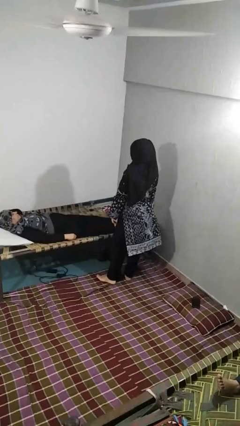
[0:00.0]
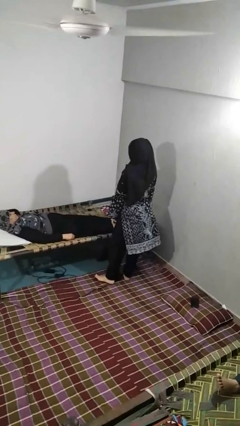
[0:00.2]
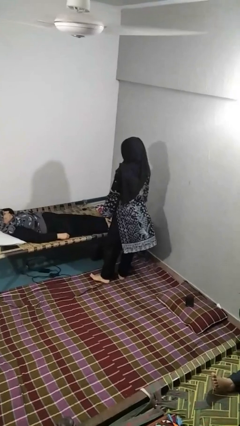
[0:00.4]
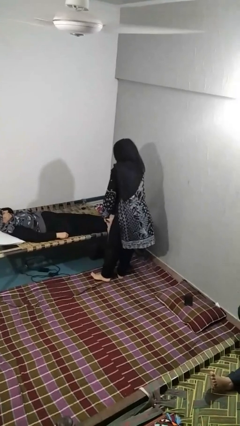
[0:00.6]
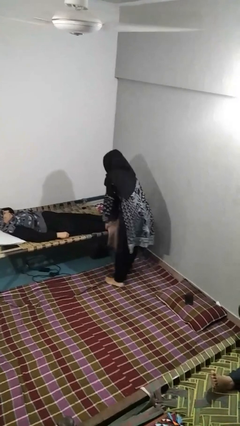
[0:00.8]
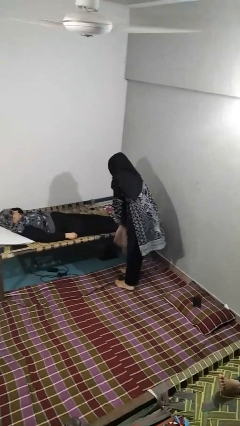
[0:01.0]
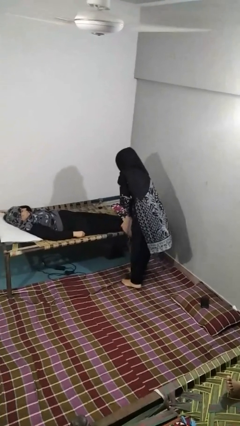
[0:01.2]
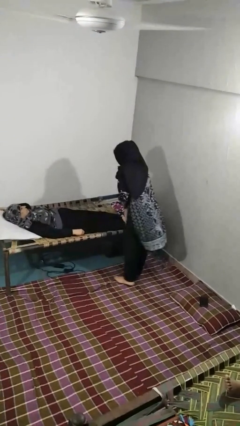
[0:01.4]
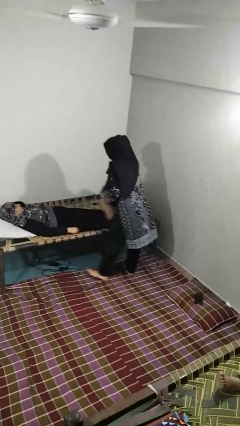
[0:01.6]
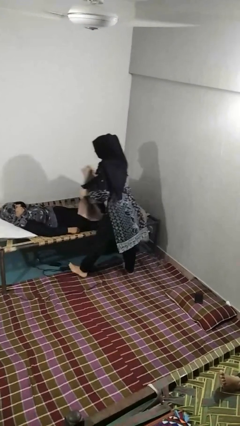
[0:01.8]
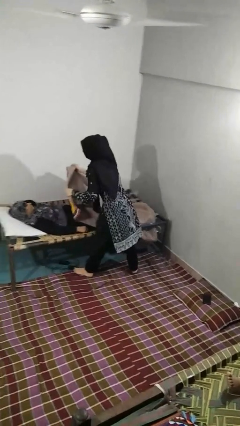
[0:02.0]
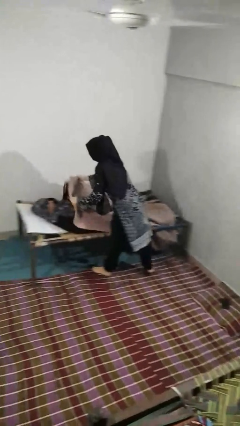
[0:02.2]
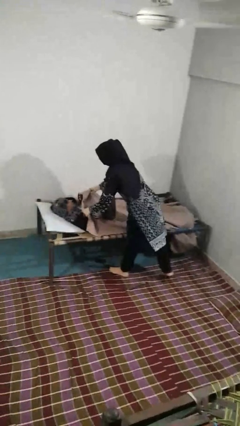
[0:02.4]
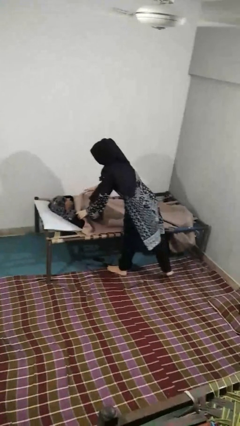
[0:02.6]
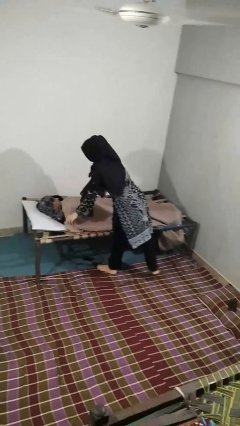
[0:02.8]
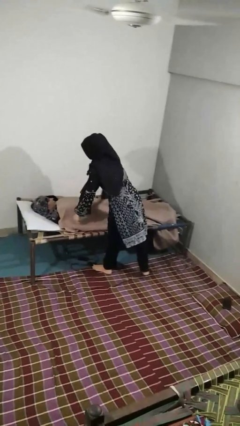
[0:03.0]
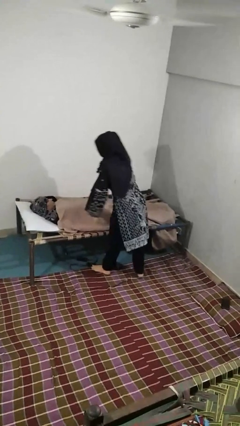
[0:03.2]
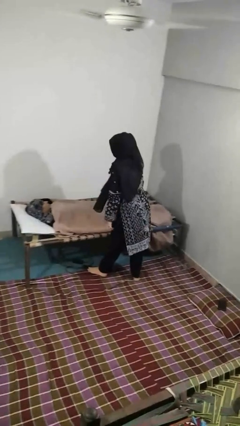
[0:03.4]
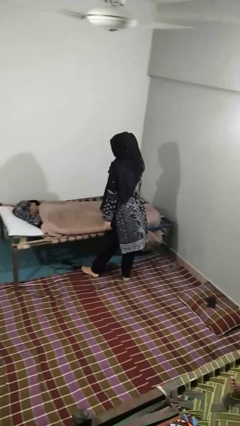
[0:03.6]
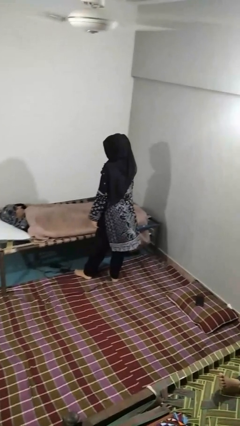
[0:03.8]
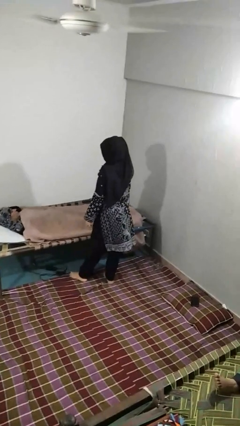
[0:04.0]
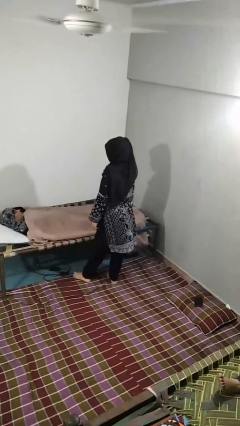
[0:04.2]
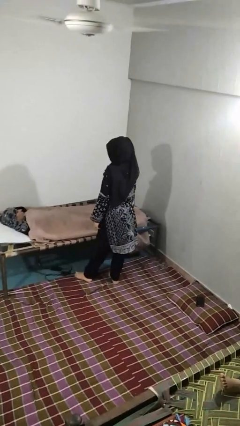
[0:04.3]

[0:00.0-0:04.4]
person covers friend with blanket

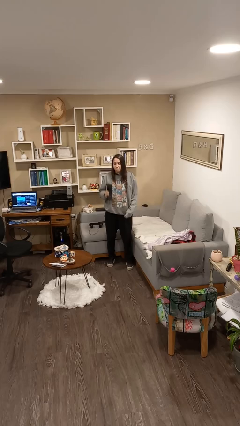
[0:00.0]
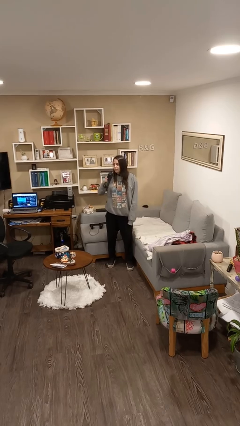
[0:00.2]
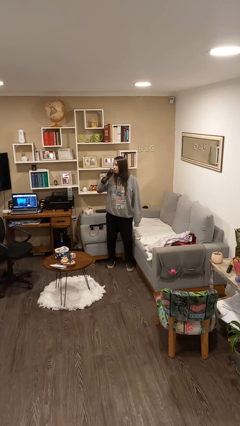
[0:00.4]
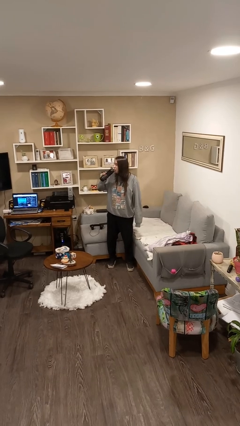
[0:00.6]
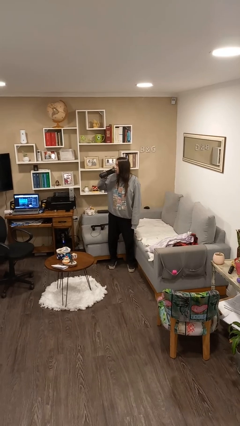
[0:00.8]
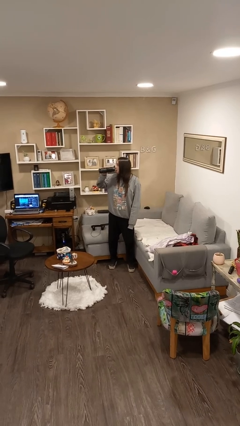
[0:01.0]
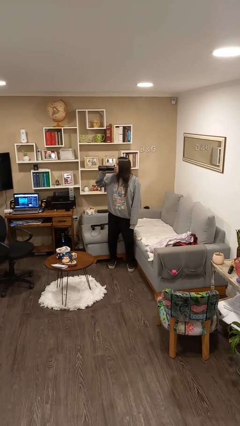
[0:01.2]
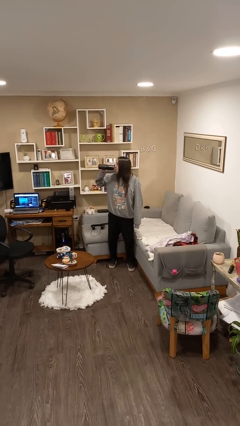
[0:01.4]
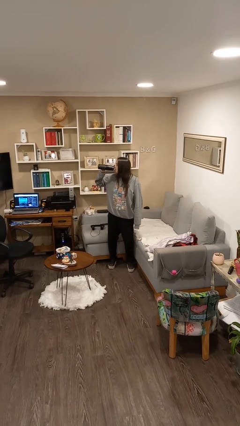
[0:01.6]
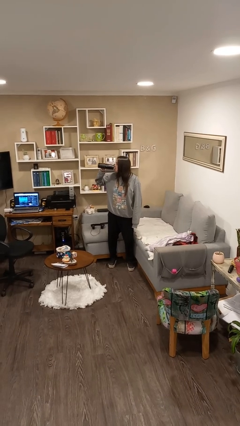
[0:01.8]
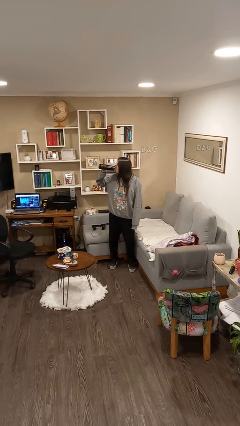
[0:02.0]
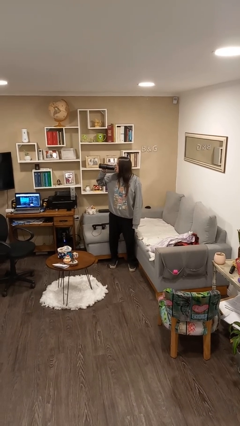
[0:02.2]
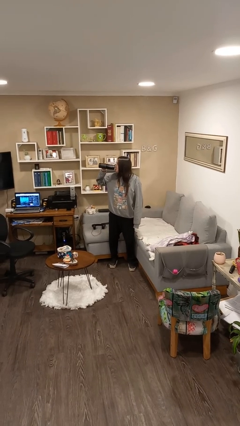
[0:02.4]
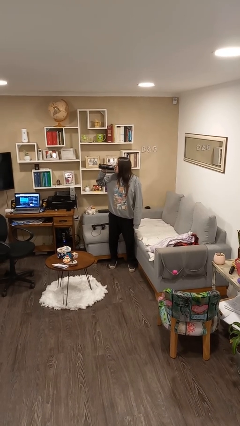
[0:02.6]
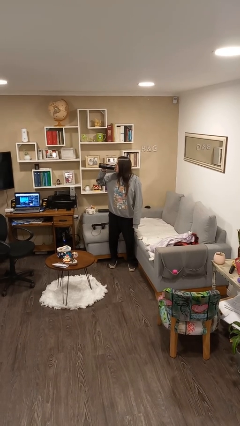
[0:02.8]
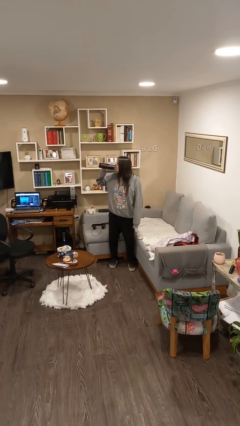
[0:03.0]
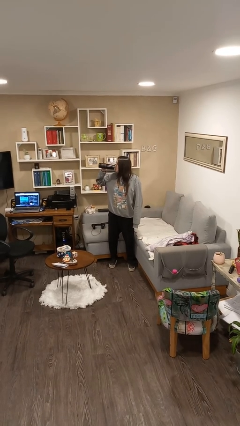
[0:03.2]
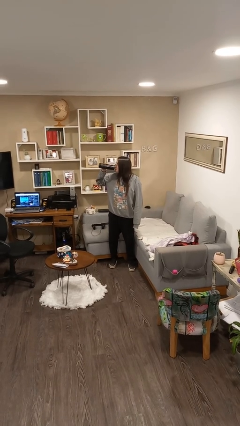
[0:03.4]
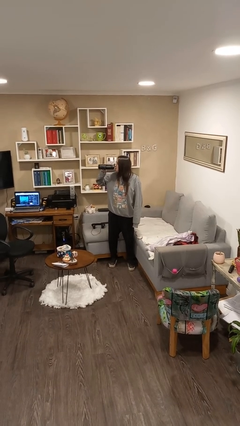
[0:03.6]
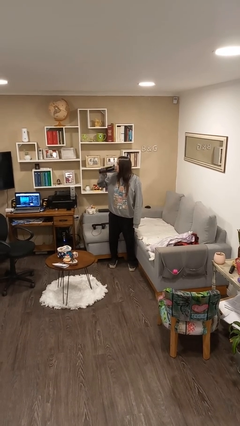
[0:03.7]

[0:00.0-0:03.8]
person drinks from bottle

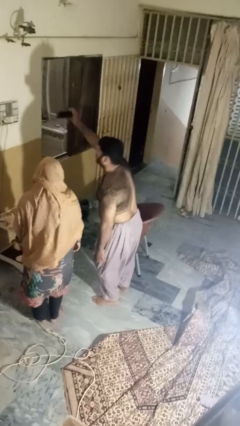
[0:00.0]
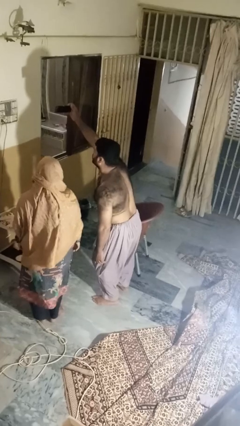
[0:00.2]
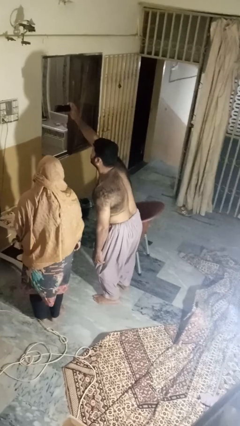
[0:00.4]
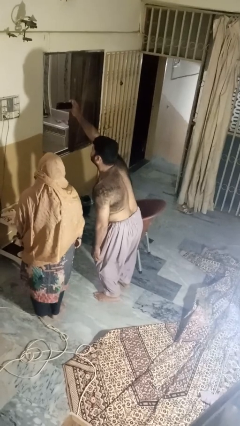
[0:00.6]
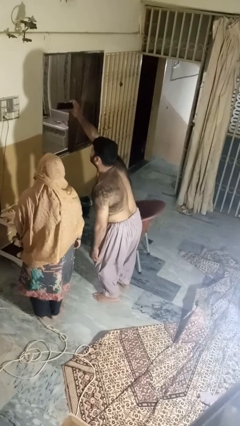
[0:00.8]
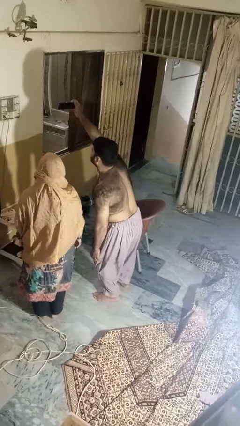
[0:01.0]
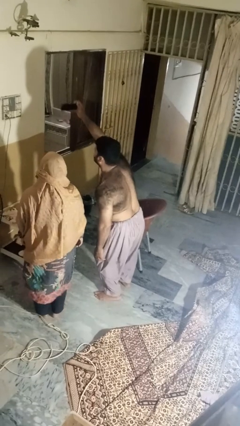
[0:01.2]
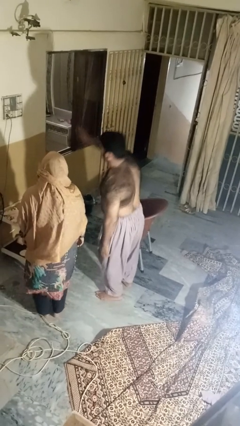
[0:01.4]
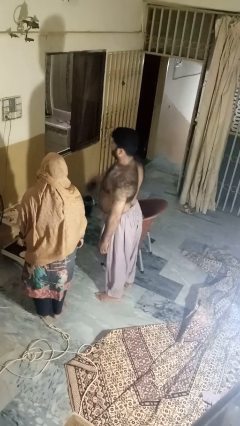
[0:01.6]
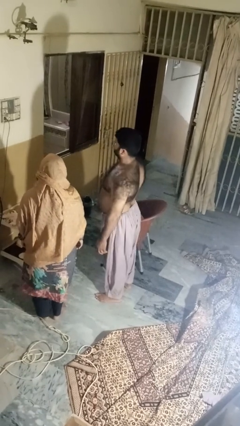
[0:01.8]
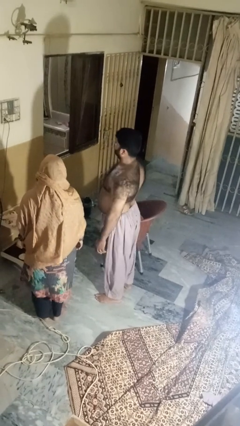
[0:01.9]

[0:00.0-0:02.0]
person takes selfie with person

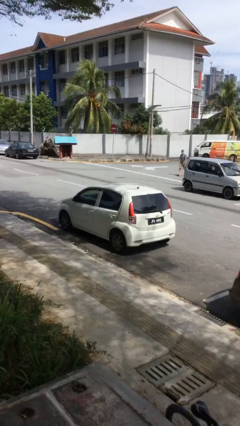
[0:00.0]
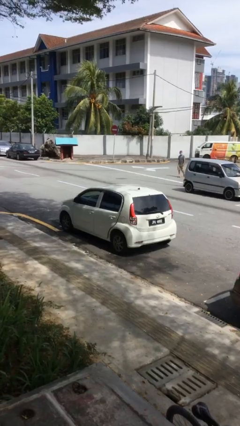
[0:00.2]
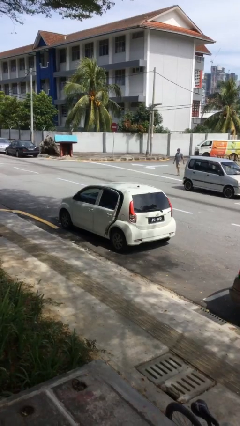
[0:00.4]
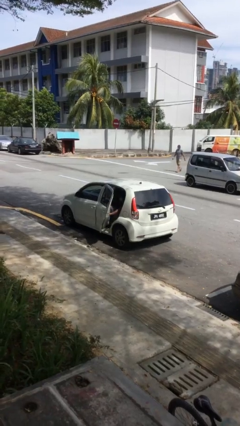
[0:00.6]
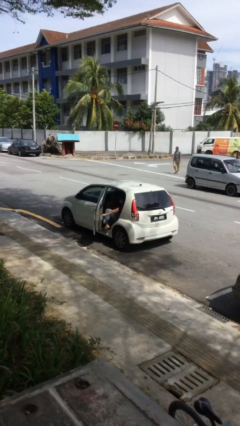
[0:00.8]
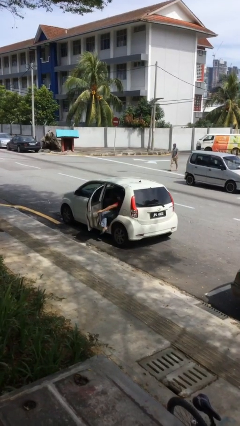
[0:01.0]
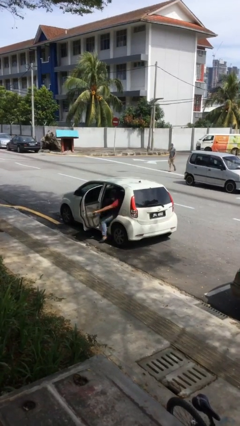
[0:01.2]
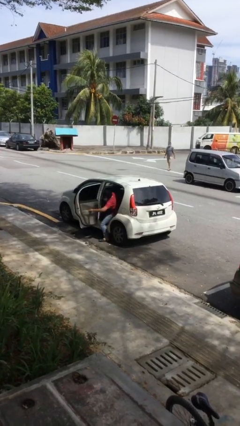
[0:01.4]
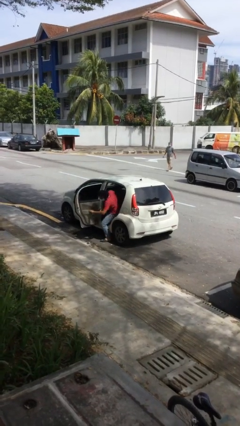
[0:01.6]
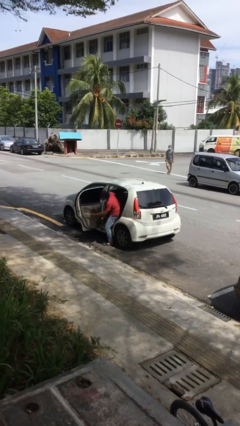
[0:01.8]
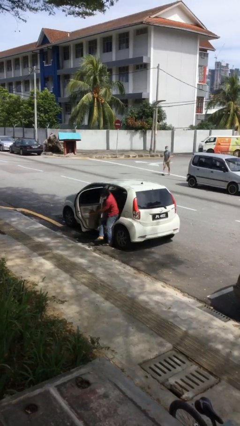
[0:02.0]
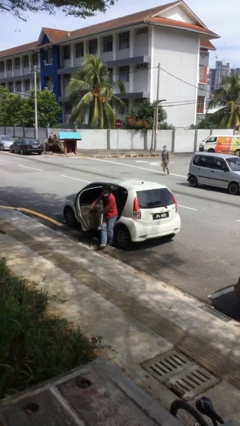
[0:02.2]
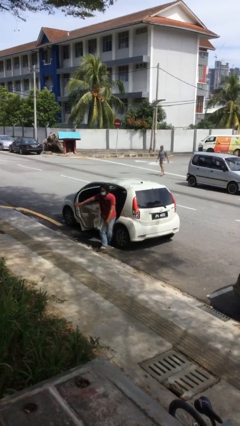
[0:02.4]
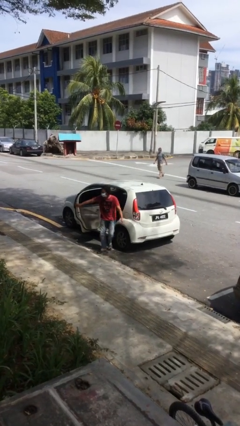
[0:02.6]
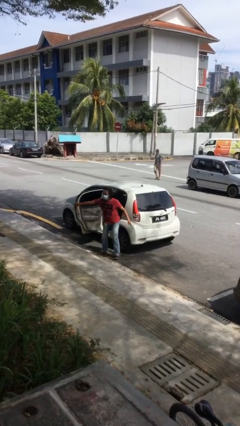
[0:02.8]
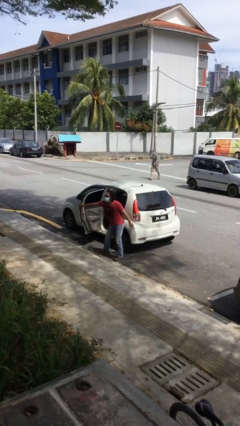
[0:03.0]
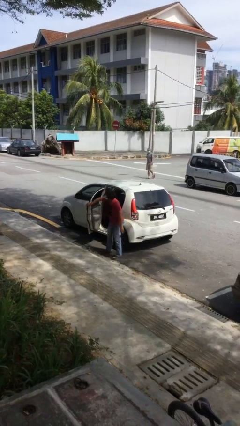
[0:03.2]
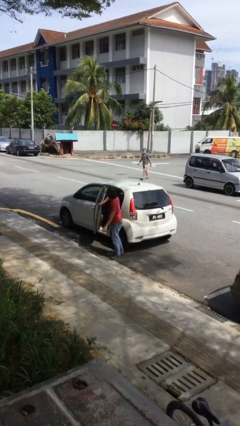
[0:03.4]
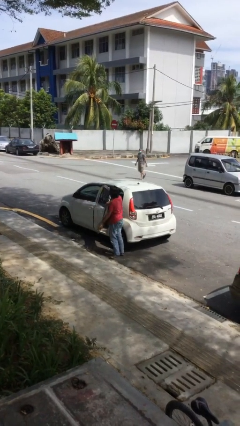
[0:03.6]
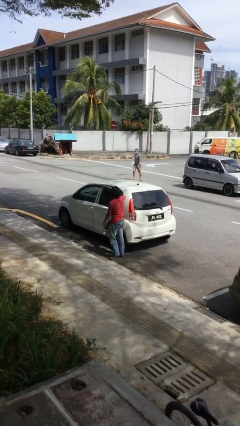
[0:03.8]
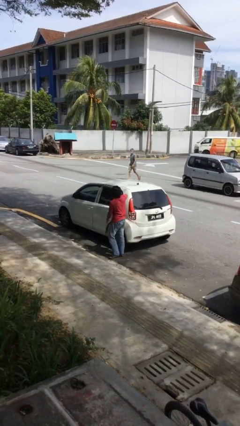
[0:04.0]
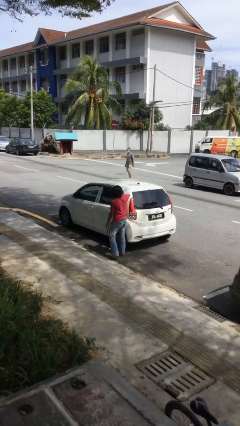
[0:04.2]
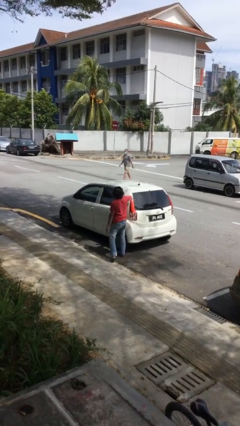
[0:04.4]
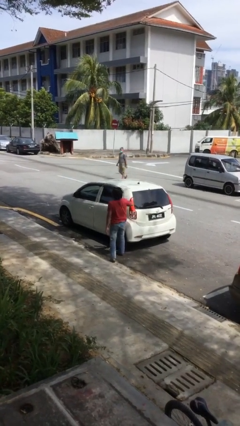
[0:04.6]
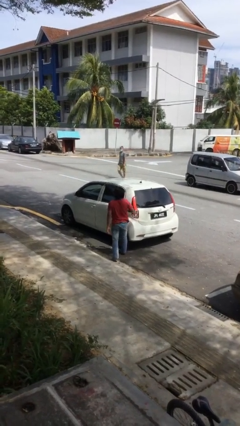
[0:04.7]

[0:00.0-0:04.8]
car drops off person

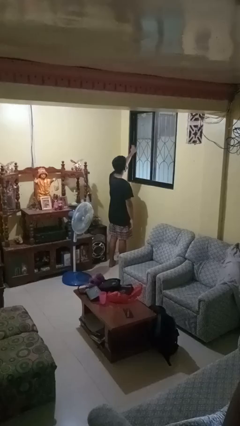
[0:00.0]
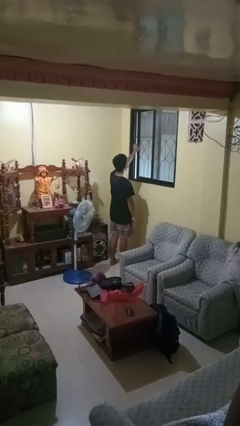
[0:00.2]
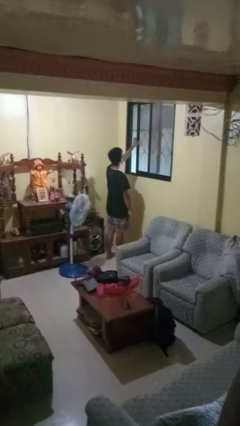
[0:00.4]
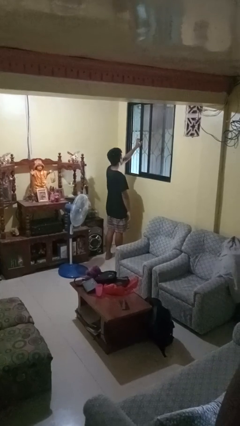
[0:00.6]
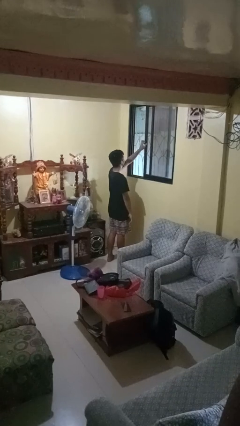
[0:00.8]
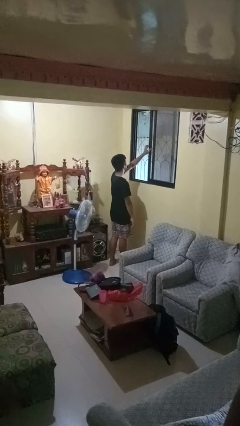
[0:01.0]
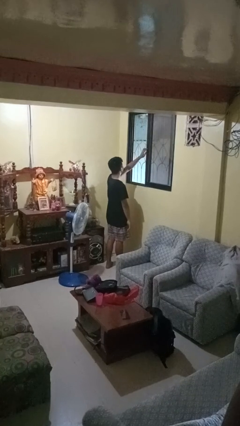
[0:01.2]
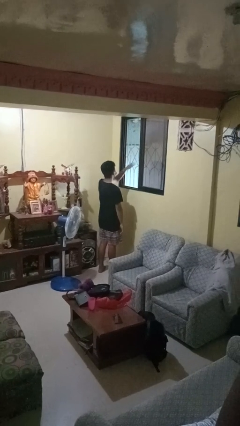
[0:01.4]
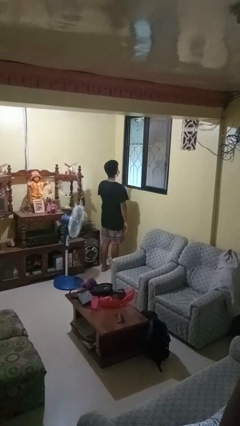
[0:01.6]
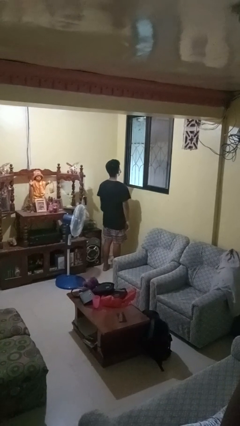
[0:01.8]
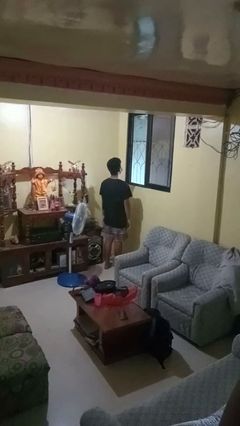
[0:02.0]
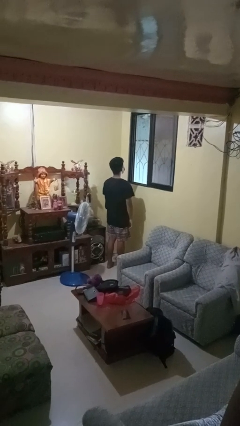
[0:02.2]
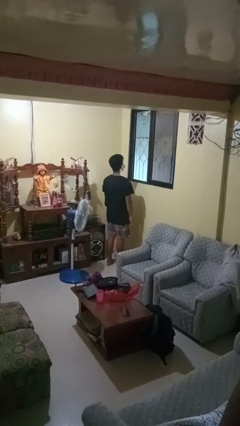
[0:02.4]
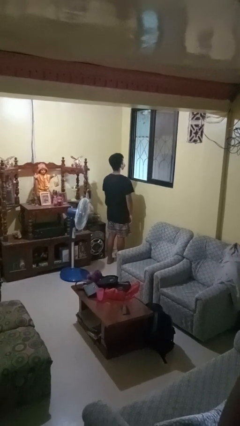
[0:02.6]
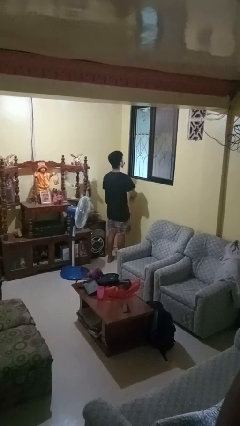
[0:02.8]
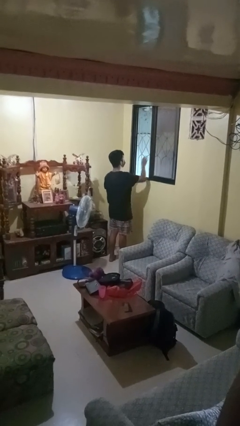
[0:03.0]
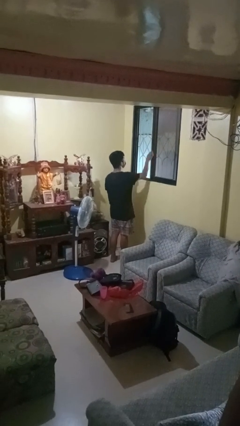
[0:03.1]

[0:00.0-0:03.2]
person opens home window
